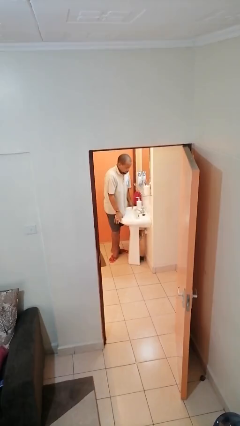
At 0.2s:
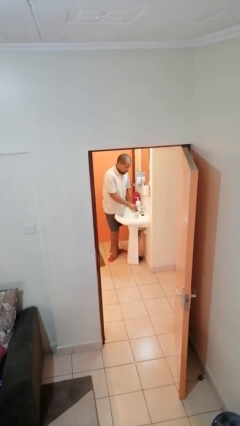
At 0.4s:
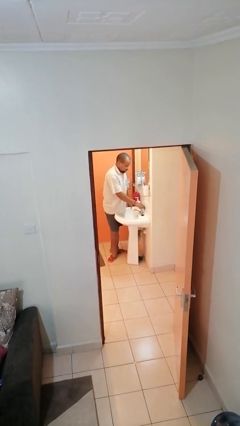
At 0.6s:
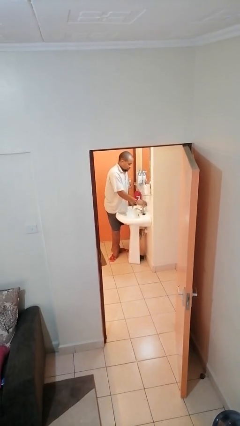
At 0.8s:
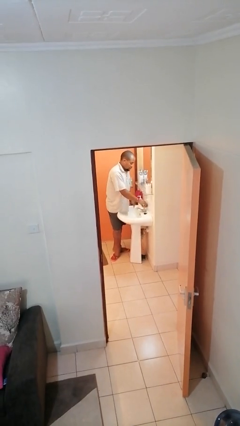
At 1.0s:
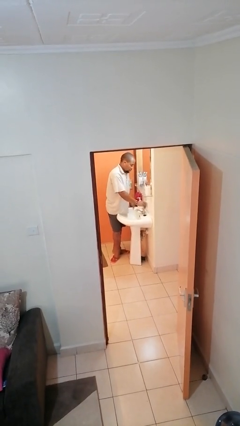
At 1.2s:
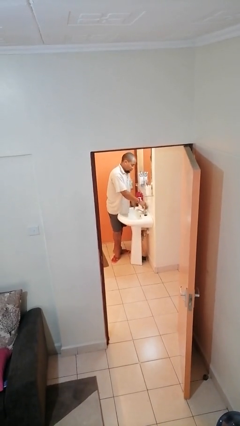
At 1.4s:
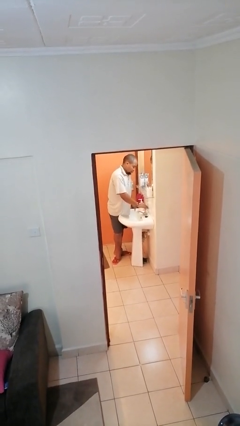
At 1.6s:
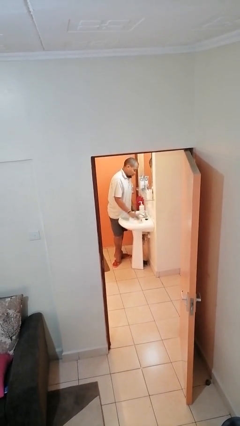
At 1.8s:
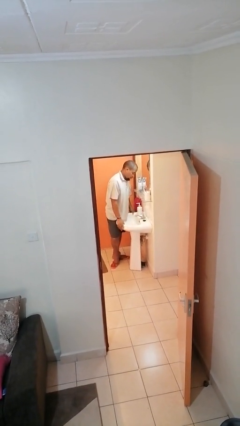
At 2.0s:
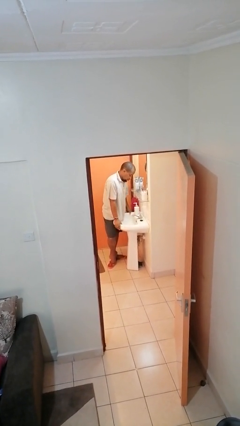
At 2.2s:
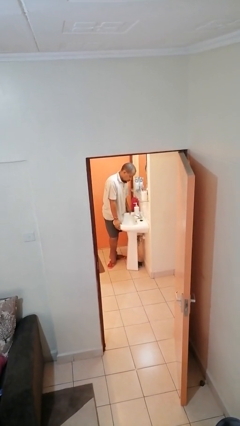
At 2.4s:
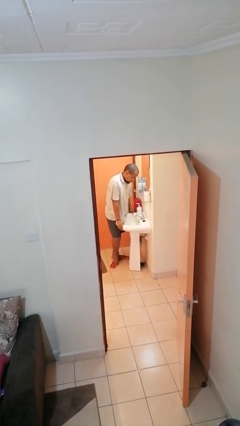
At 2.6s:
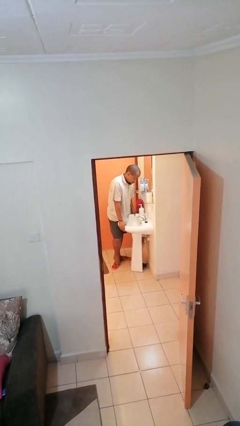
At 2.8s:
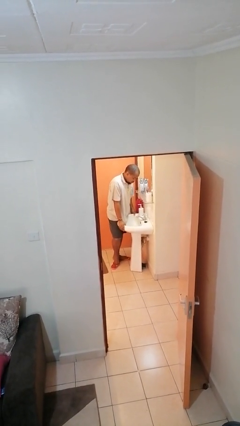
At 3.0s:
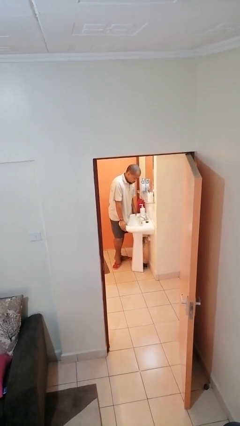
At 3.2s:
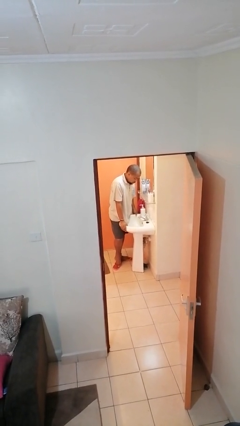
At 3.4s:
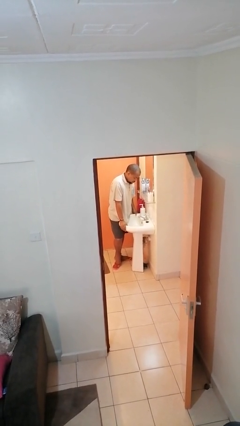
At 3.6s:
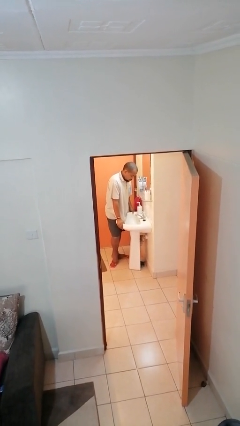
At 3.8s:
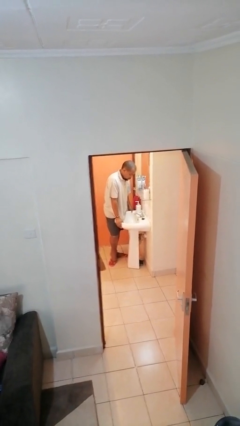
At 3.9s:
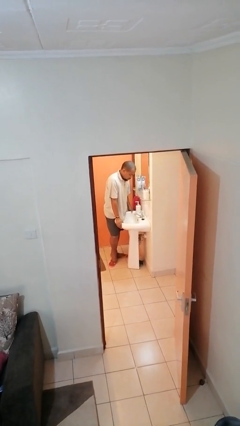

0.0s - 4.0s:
person turns on faucet

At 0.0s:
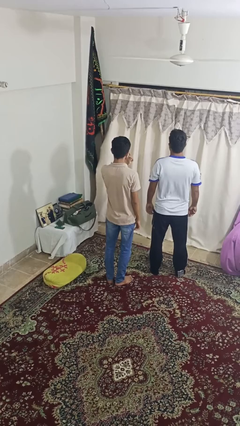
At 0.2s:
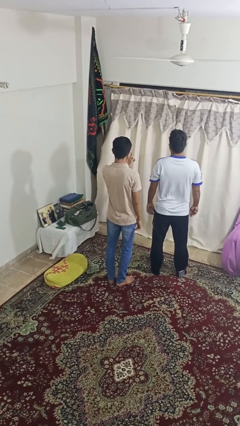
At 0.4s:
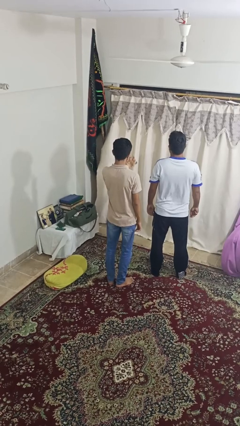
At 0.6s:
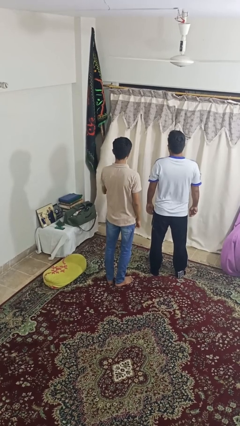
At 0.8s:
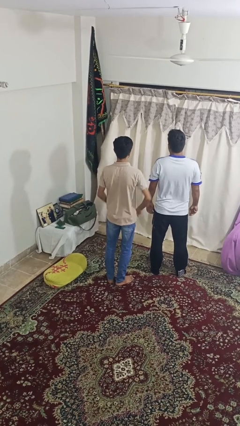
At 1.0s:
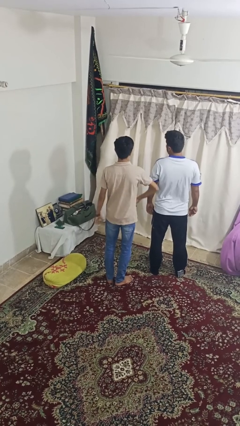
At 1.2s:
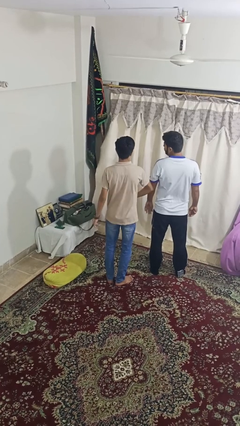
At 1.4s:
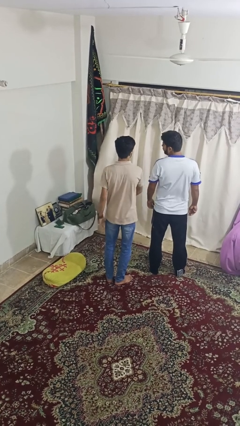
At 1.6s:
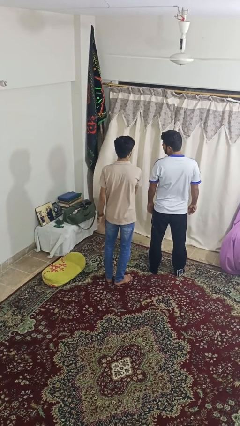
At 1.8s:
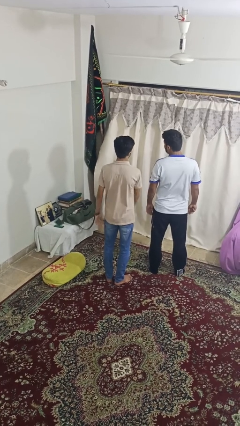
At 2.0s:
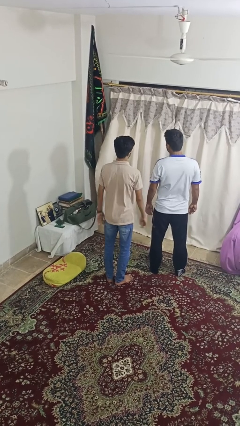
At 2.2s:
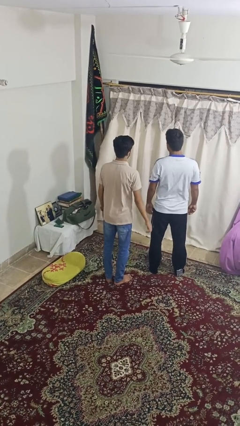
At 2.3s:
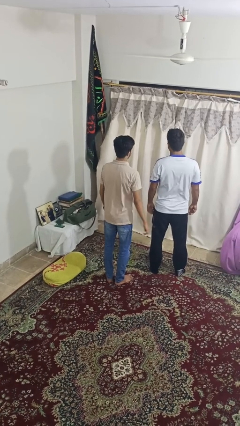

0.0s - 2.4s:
person nudges person with elbow

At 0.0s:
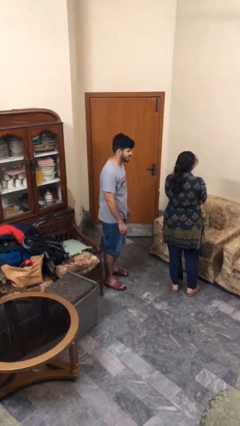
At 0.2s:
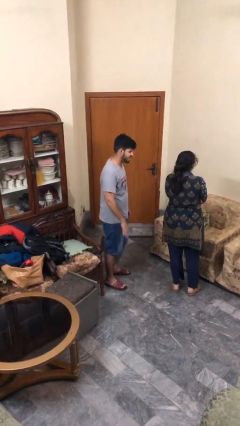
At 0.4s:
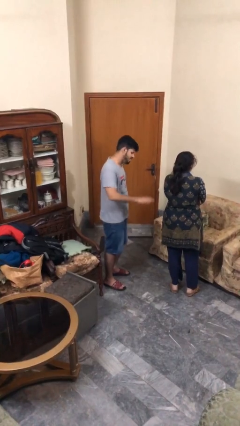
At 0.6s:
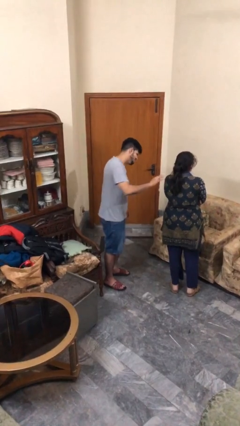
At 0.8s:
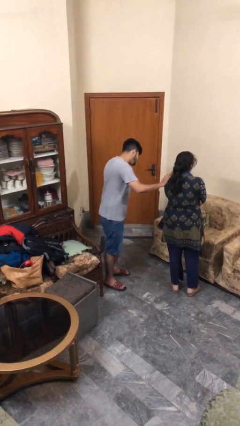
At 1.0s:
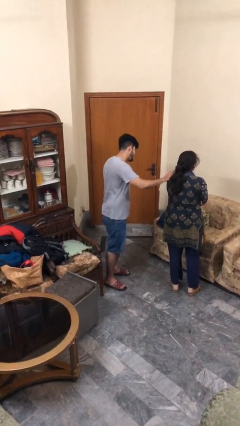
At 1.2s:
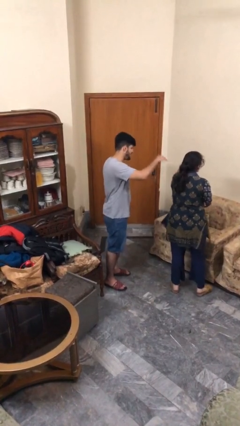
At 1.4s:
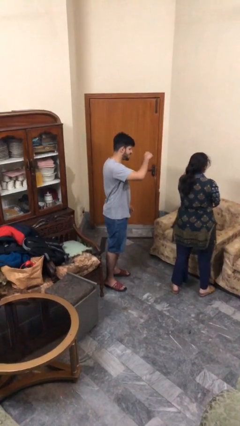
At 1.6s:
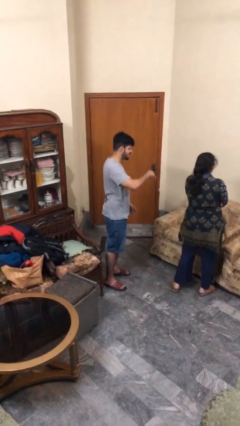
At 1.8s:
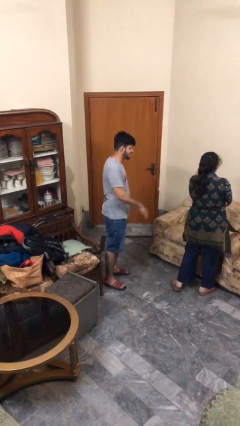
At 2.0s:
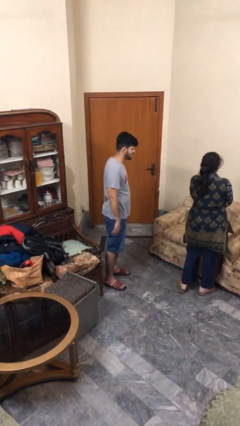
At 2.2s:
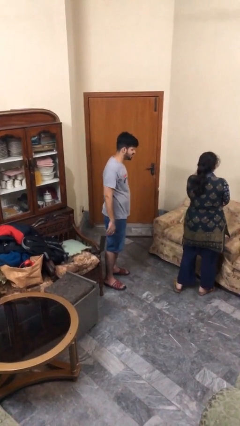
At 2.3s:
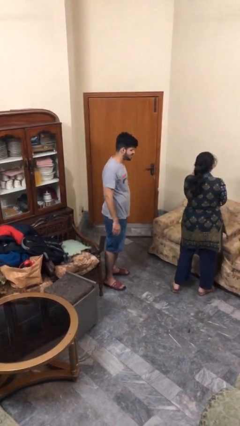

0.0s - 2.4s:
person shoves person

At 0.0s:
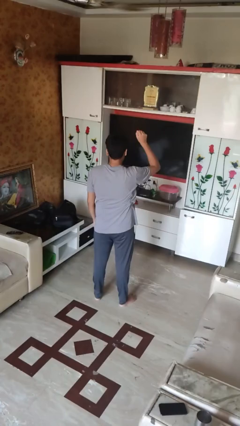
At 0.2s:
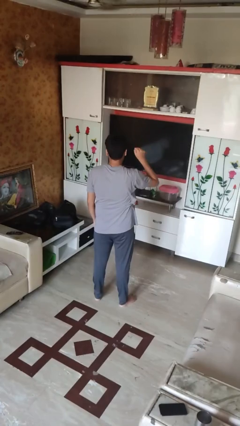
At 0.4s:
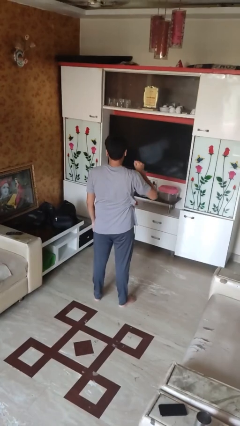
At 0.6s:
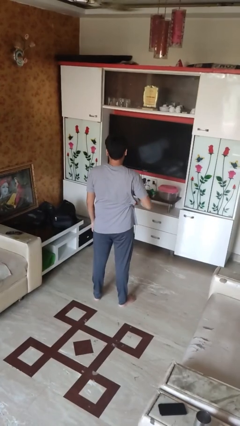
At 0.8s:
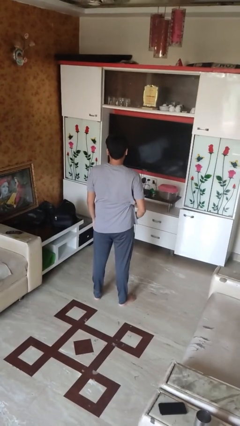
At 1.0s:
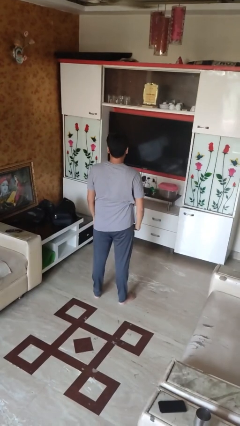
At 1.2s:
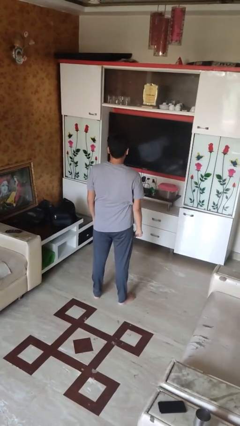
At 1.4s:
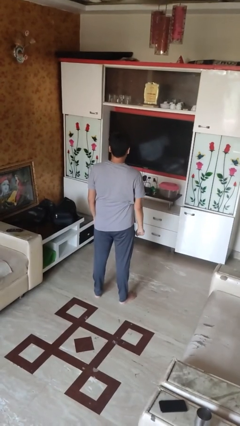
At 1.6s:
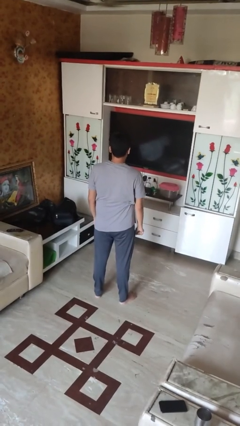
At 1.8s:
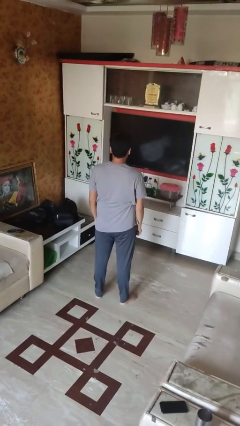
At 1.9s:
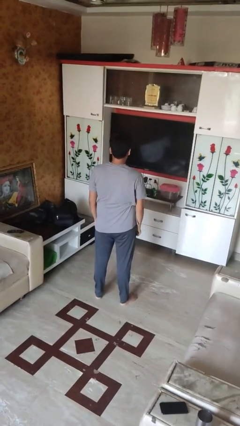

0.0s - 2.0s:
person gestures lower hand

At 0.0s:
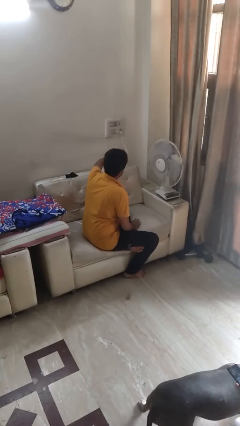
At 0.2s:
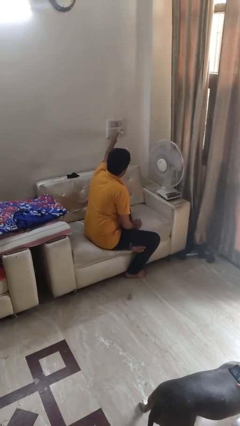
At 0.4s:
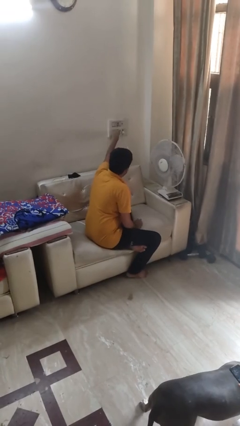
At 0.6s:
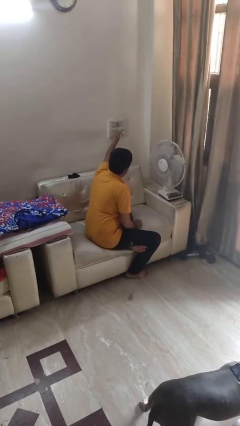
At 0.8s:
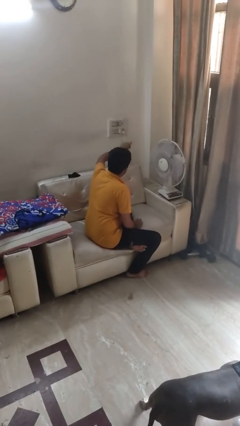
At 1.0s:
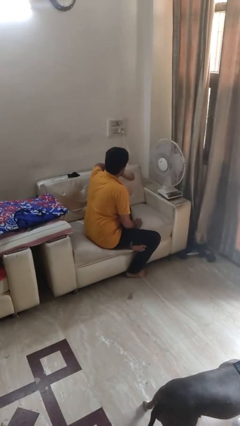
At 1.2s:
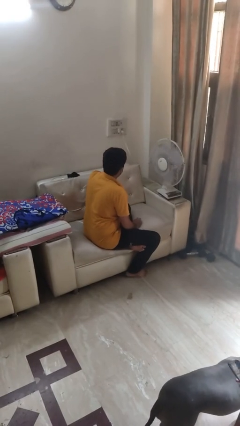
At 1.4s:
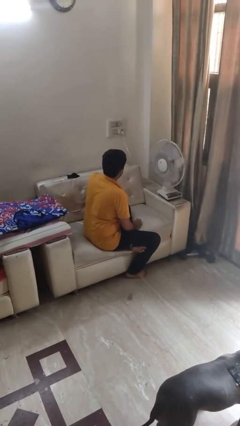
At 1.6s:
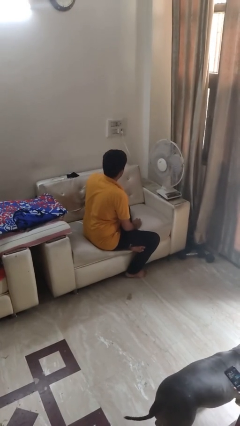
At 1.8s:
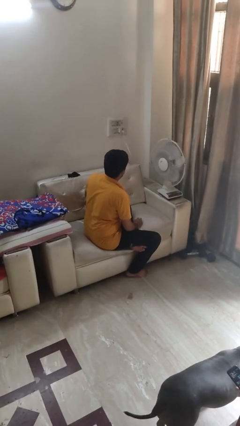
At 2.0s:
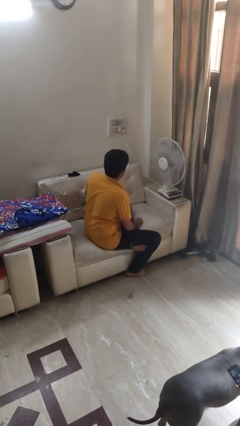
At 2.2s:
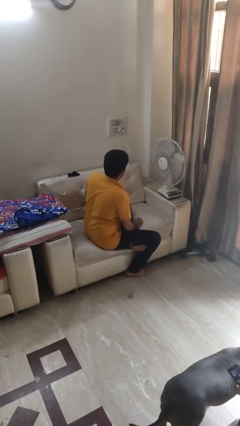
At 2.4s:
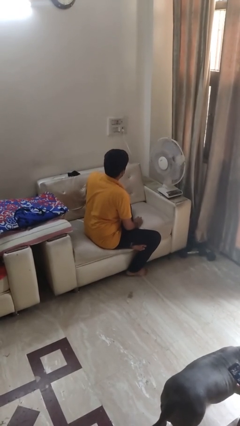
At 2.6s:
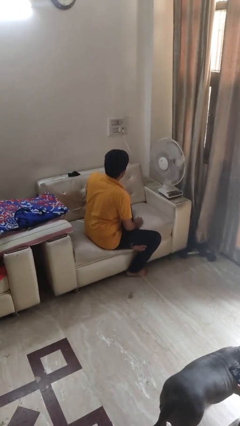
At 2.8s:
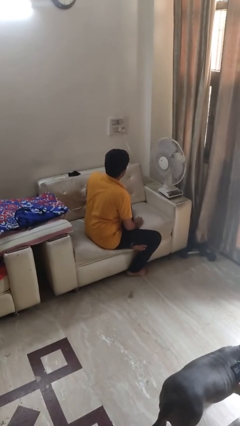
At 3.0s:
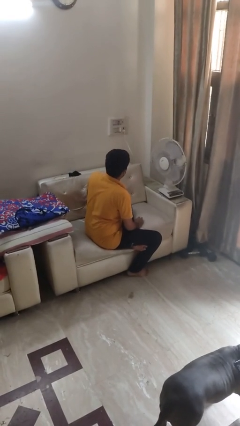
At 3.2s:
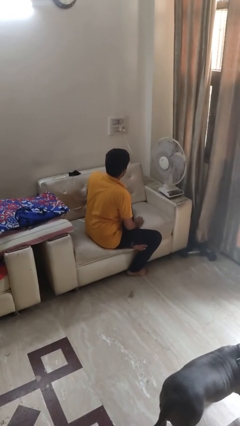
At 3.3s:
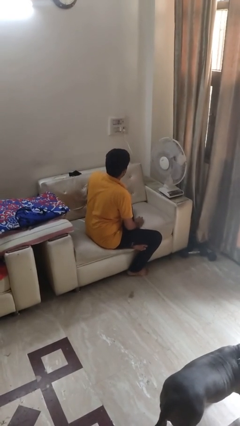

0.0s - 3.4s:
person turns off fan

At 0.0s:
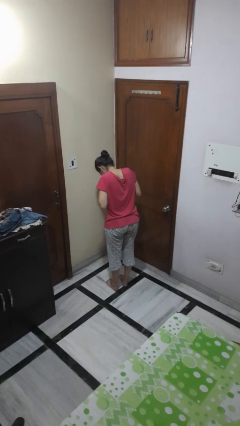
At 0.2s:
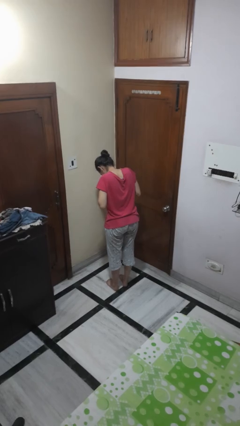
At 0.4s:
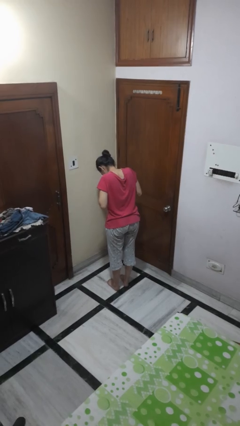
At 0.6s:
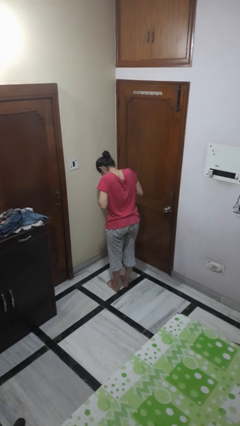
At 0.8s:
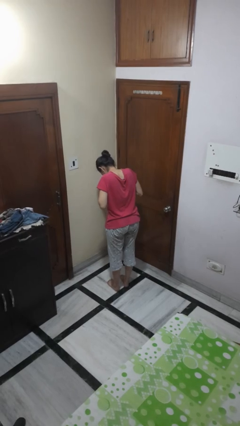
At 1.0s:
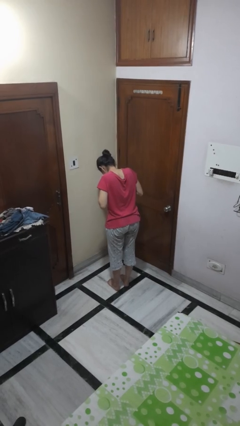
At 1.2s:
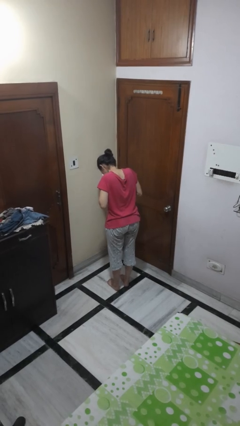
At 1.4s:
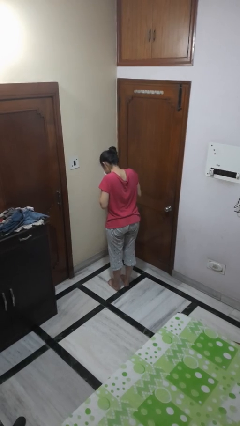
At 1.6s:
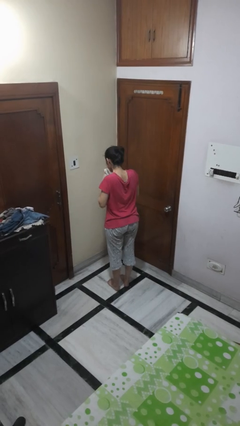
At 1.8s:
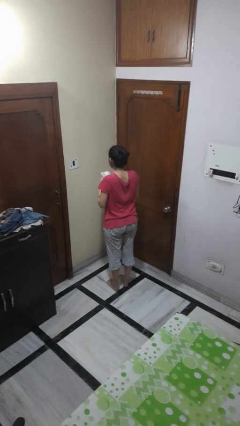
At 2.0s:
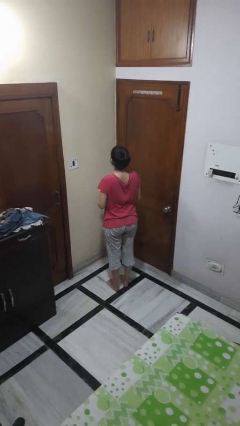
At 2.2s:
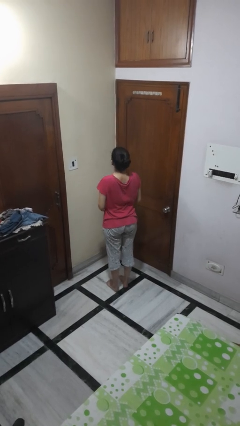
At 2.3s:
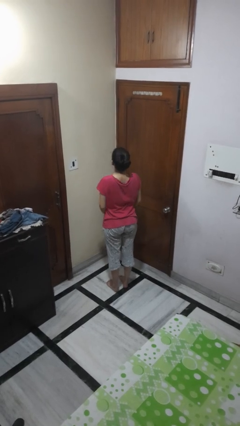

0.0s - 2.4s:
person blows nose

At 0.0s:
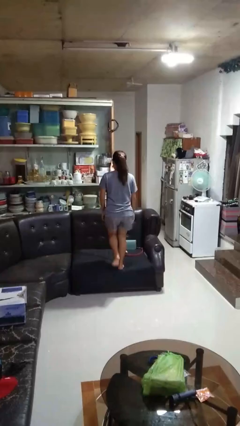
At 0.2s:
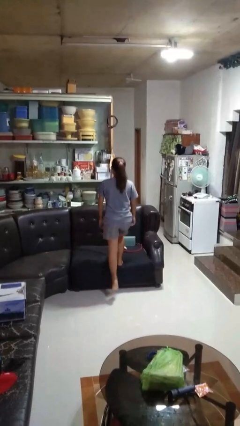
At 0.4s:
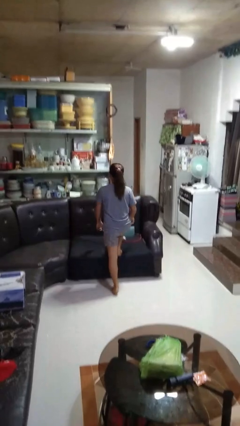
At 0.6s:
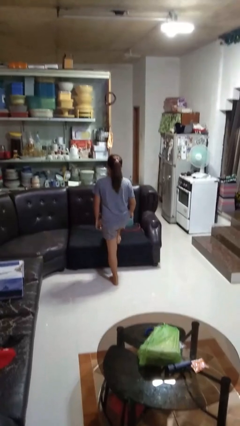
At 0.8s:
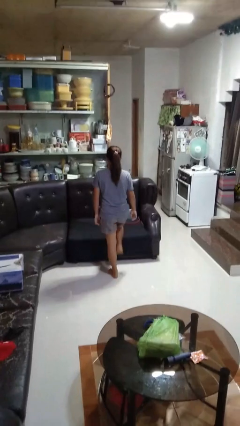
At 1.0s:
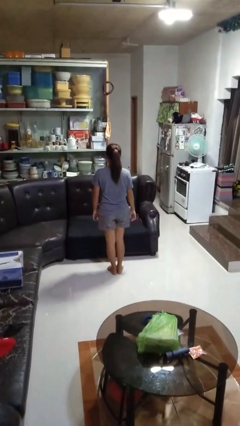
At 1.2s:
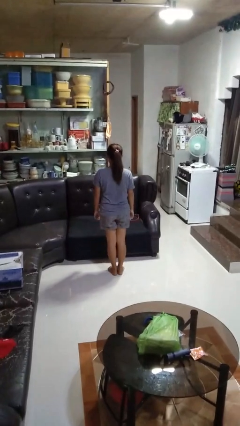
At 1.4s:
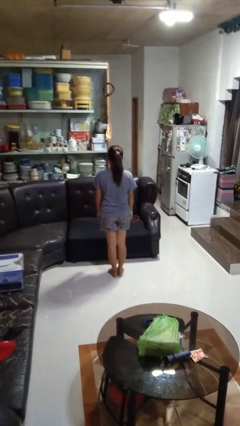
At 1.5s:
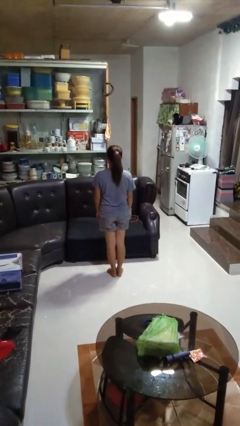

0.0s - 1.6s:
person climbs off couch
